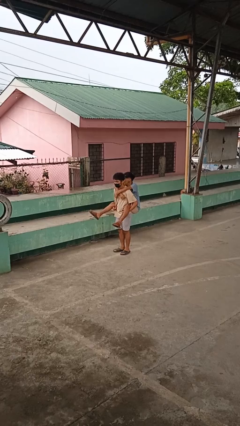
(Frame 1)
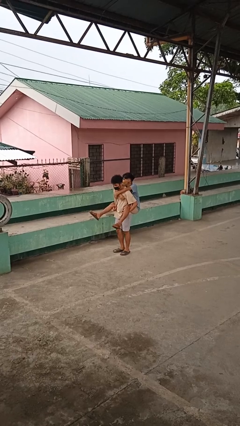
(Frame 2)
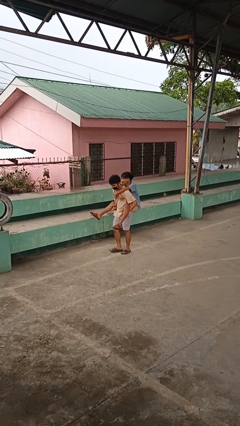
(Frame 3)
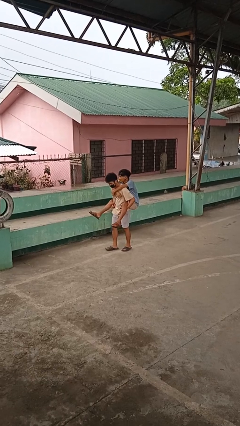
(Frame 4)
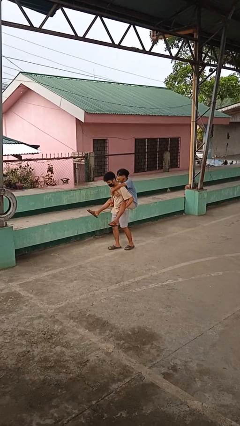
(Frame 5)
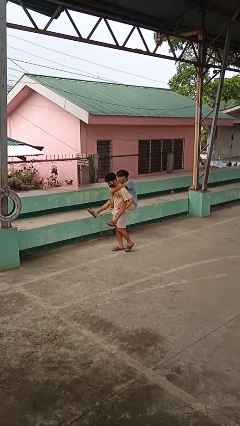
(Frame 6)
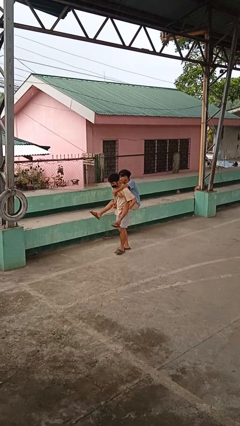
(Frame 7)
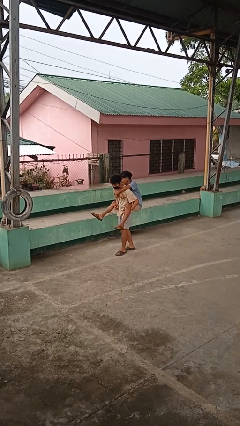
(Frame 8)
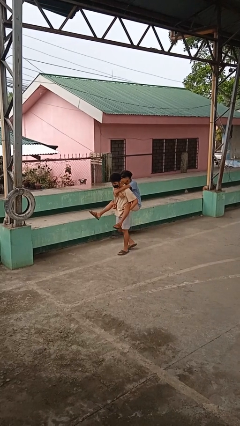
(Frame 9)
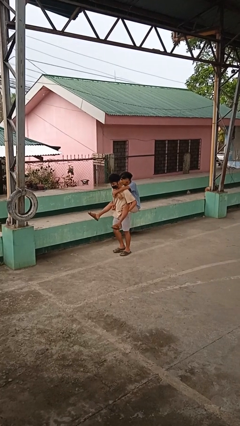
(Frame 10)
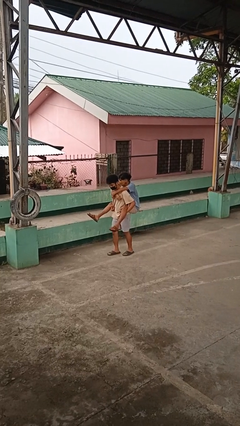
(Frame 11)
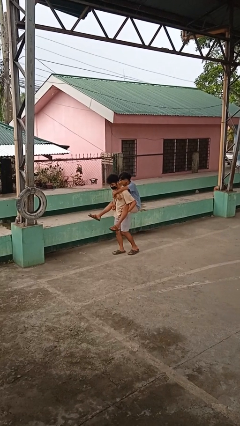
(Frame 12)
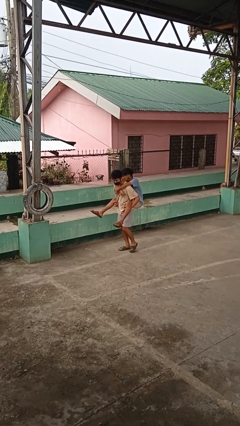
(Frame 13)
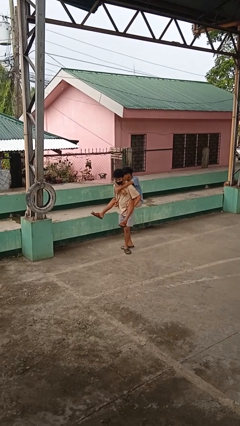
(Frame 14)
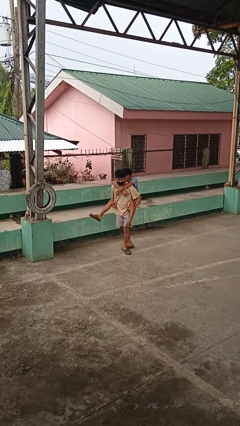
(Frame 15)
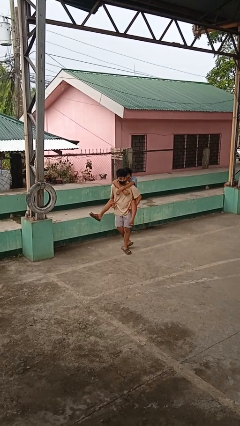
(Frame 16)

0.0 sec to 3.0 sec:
person carries person on back

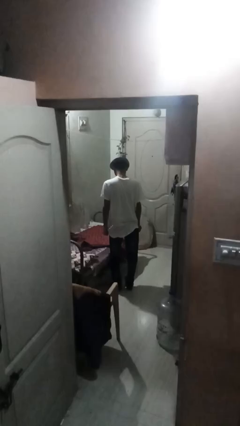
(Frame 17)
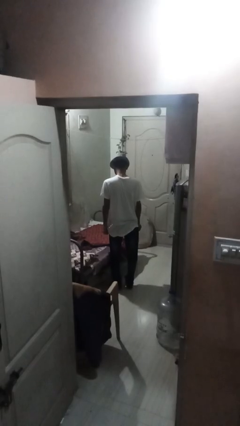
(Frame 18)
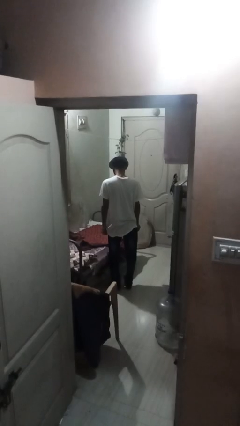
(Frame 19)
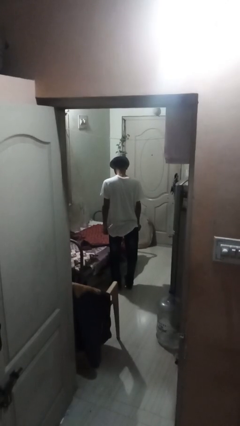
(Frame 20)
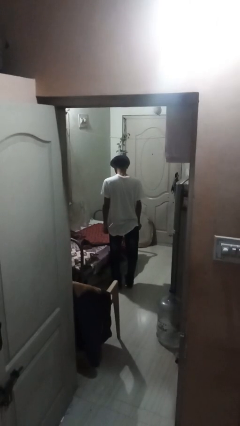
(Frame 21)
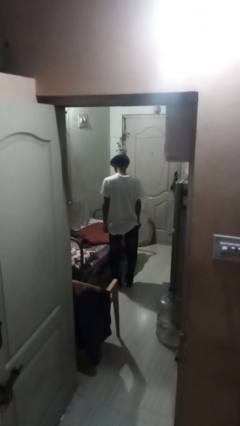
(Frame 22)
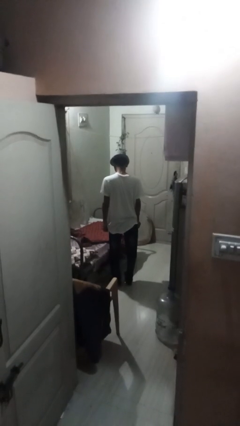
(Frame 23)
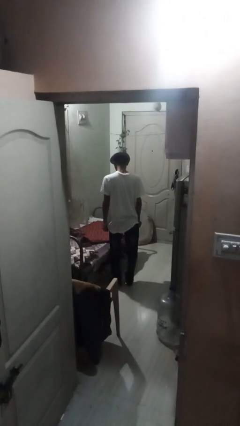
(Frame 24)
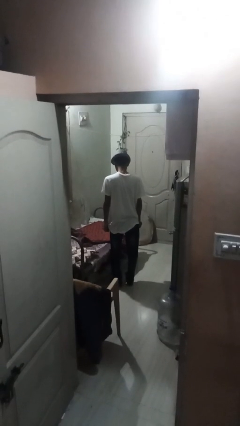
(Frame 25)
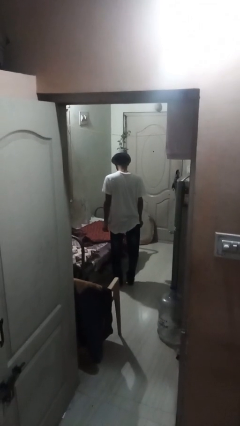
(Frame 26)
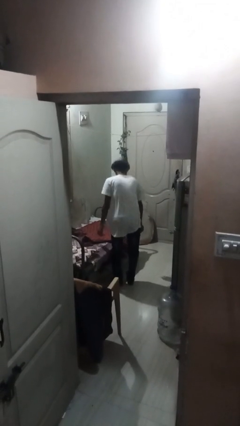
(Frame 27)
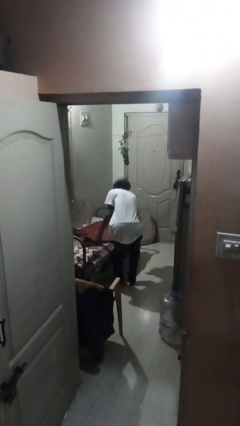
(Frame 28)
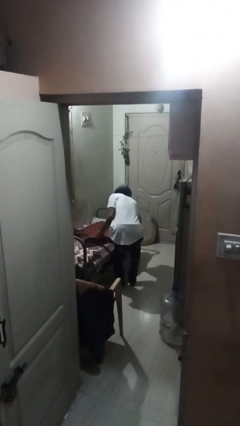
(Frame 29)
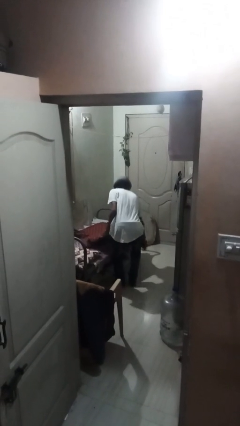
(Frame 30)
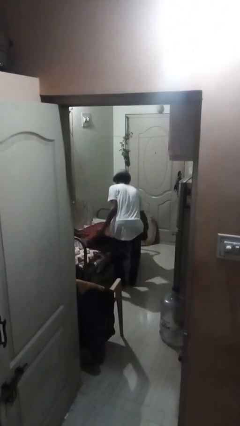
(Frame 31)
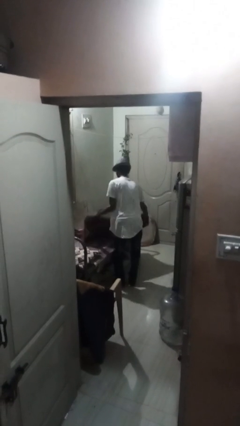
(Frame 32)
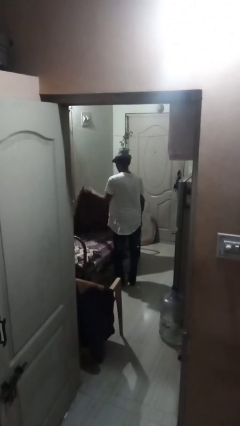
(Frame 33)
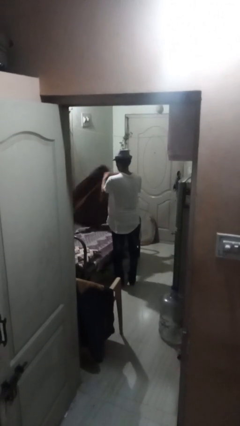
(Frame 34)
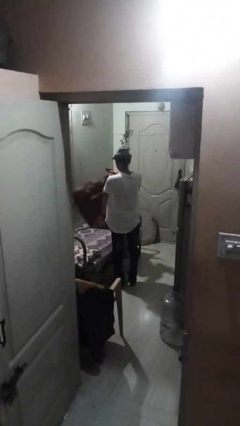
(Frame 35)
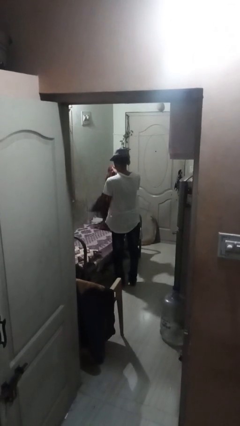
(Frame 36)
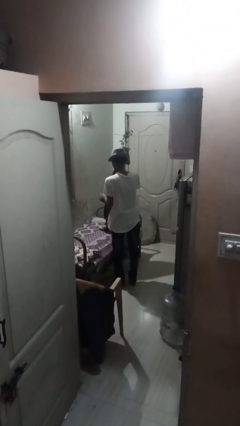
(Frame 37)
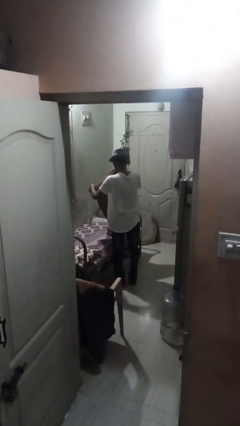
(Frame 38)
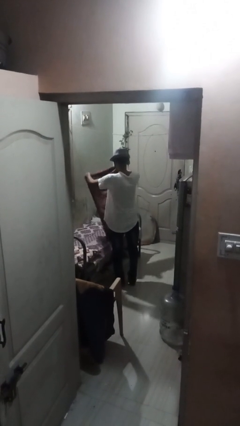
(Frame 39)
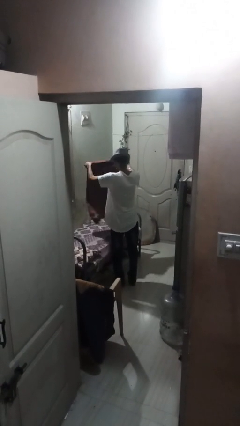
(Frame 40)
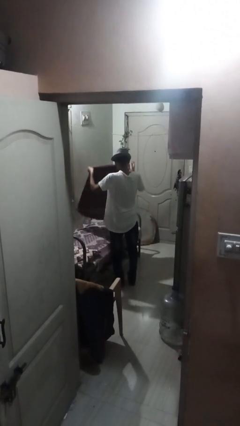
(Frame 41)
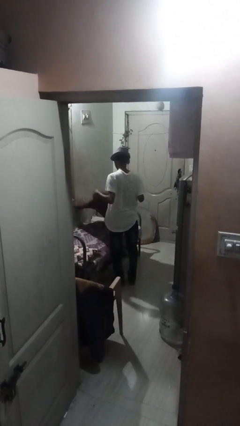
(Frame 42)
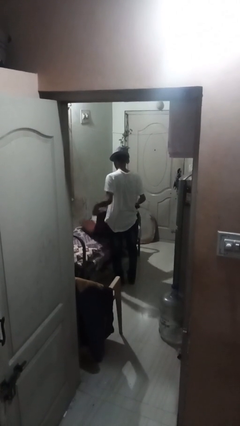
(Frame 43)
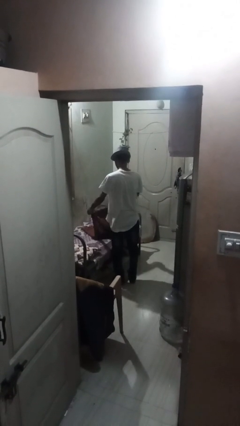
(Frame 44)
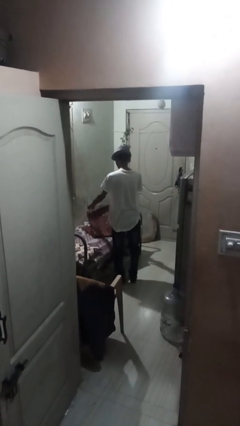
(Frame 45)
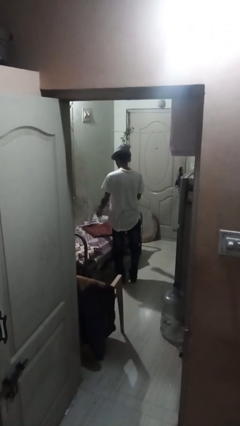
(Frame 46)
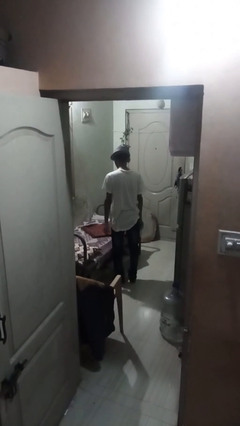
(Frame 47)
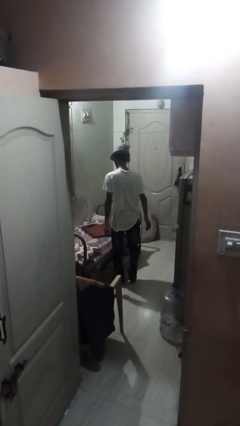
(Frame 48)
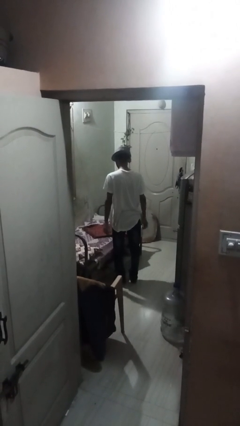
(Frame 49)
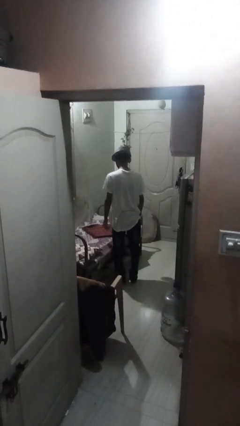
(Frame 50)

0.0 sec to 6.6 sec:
person folds blanket

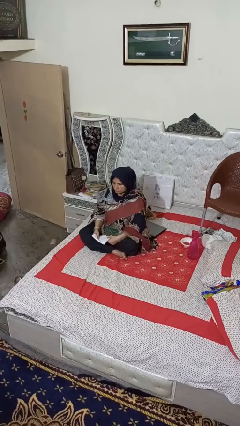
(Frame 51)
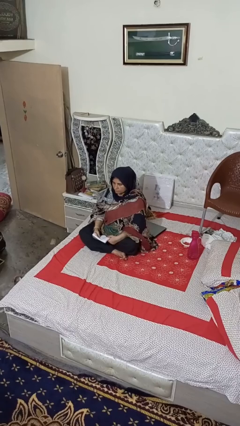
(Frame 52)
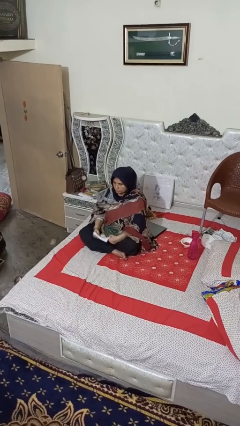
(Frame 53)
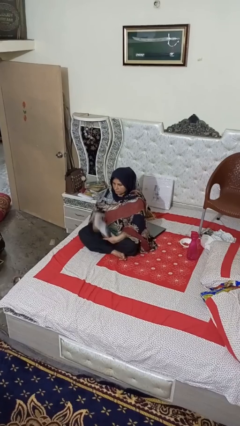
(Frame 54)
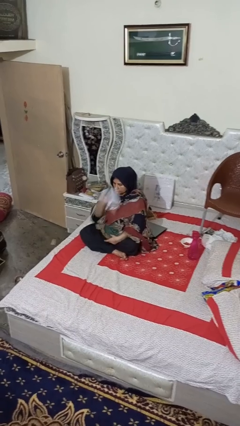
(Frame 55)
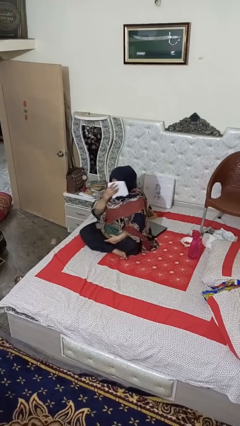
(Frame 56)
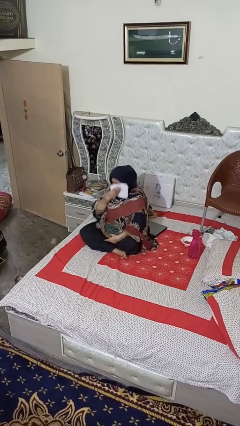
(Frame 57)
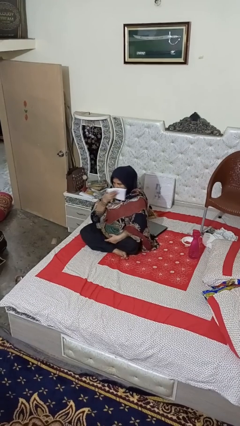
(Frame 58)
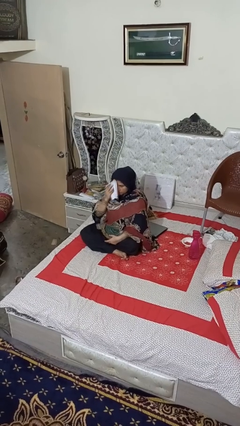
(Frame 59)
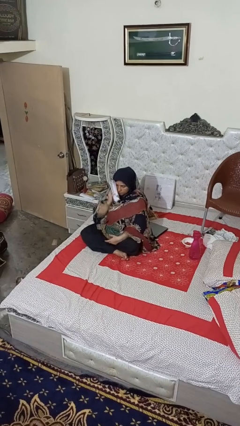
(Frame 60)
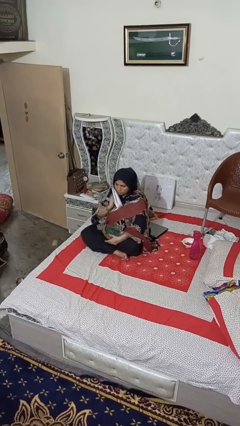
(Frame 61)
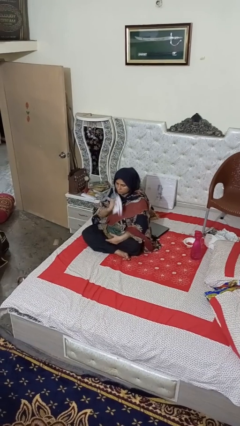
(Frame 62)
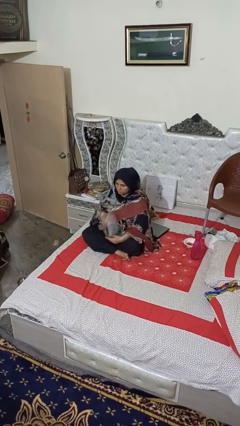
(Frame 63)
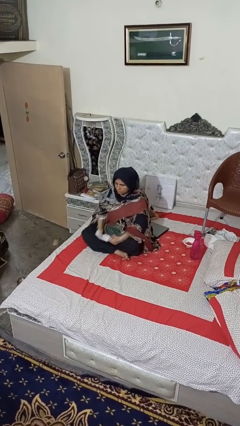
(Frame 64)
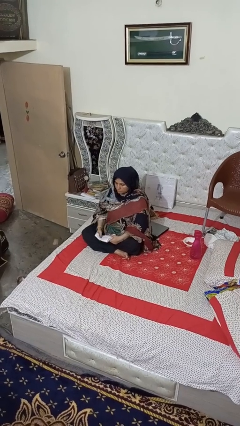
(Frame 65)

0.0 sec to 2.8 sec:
person wipes mouth with napkin

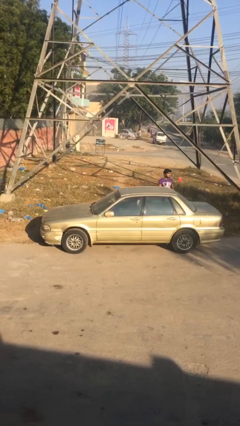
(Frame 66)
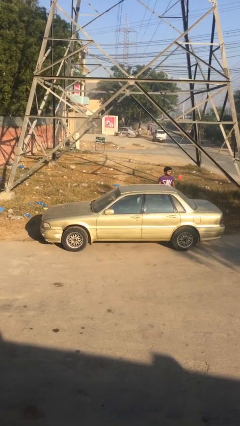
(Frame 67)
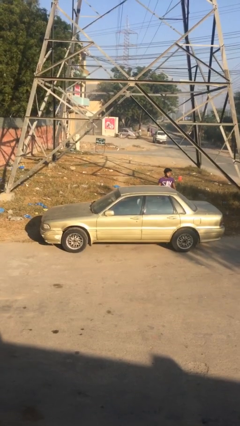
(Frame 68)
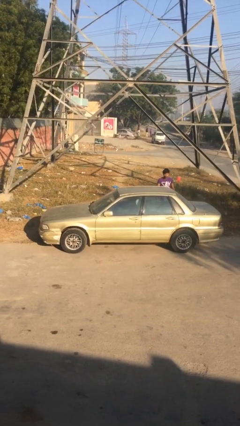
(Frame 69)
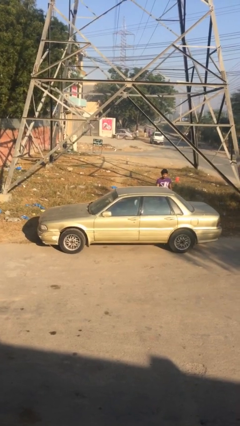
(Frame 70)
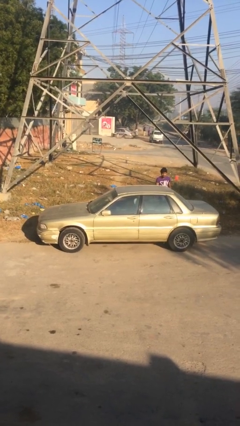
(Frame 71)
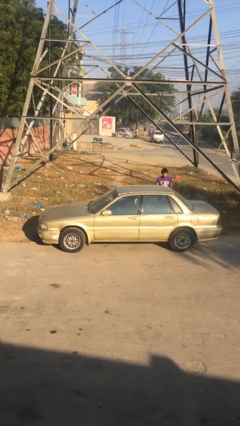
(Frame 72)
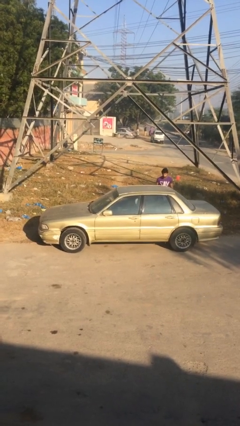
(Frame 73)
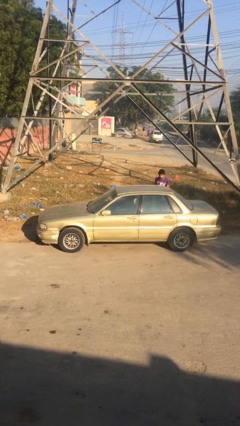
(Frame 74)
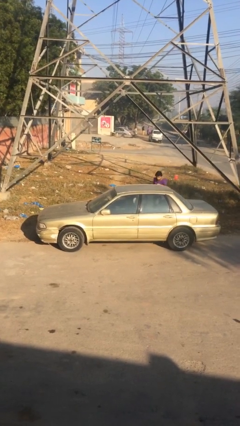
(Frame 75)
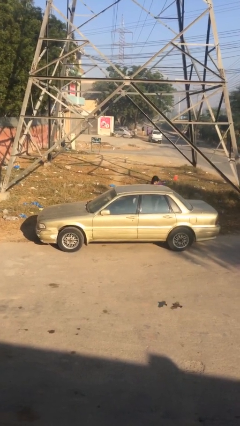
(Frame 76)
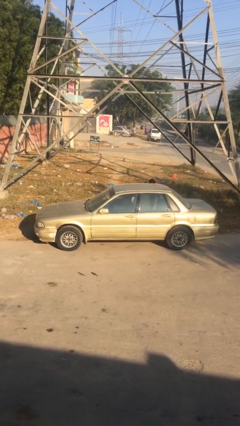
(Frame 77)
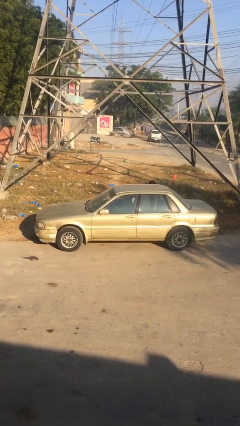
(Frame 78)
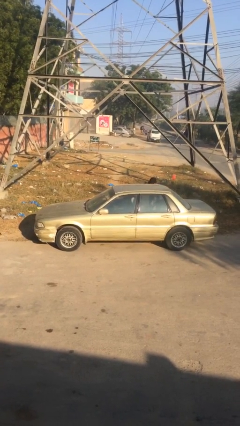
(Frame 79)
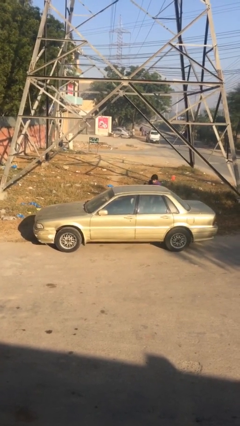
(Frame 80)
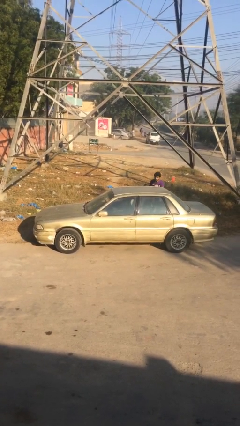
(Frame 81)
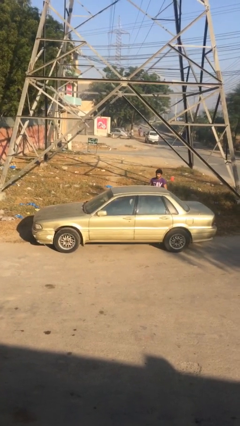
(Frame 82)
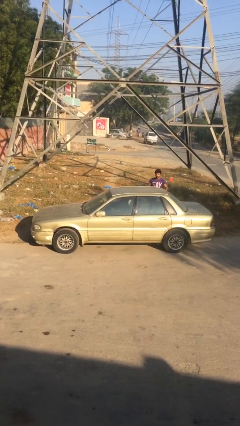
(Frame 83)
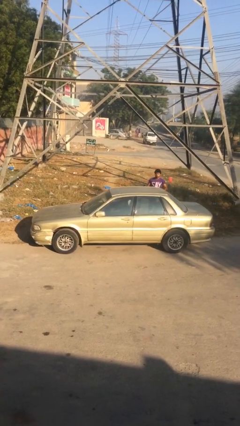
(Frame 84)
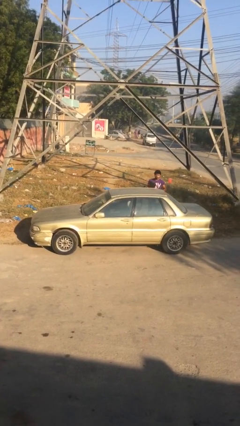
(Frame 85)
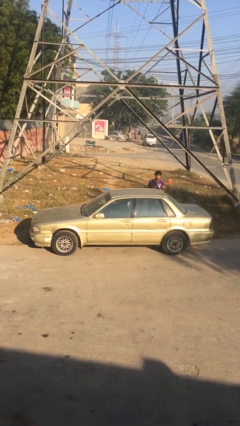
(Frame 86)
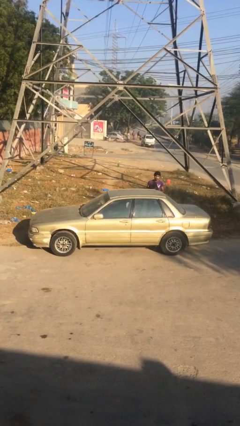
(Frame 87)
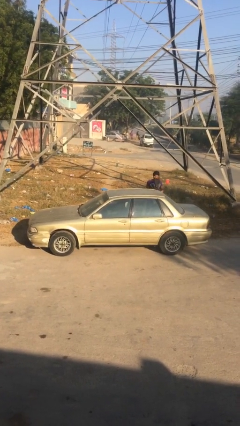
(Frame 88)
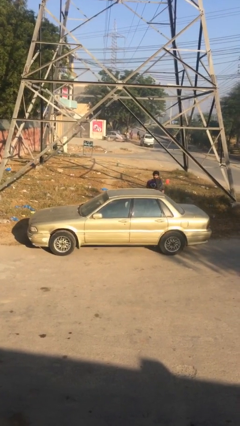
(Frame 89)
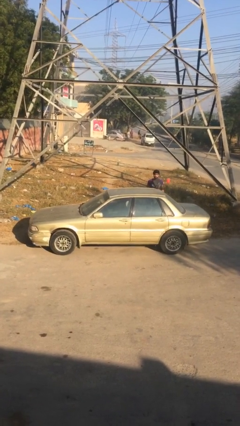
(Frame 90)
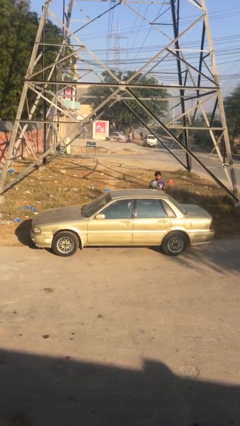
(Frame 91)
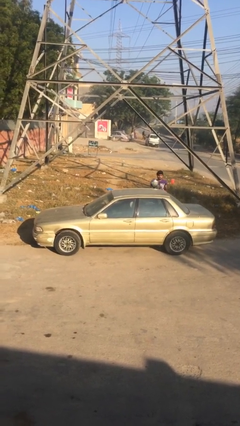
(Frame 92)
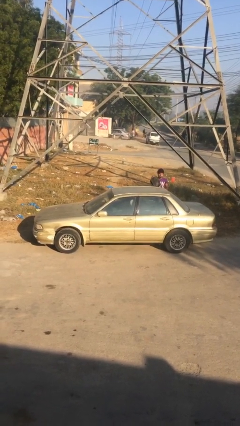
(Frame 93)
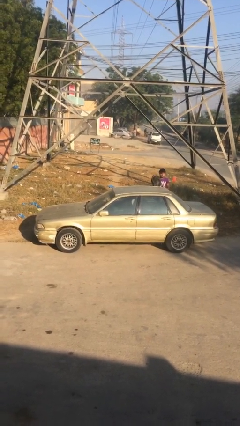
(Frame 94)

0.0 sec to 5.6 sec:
person unloads car
